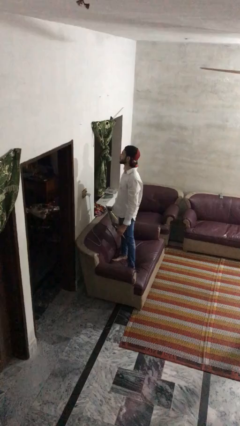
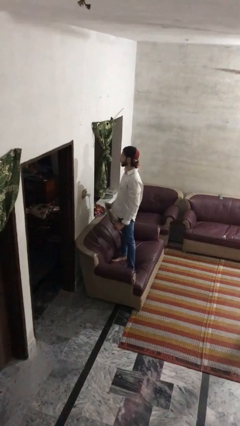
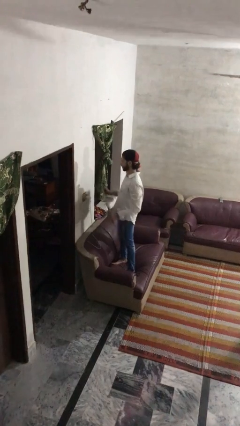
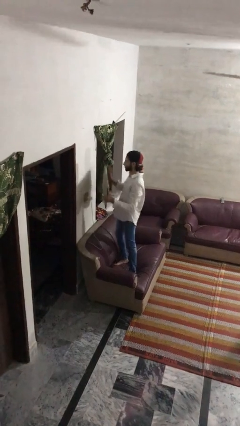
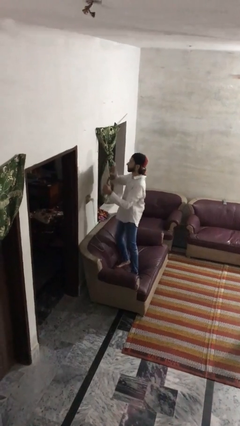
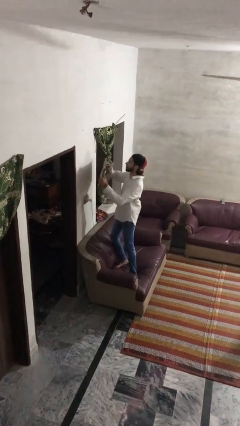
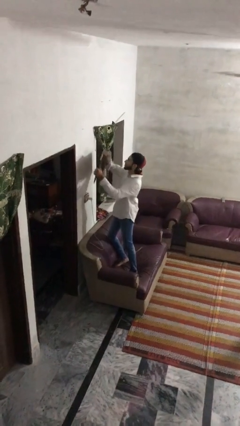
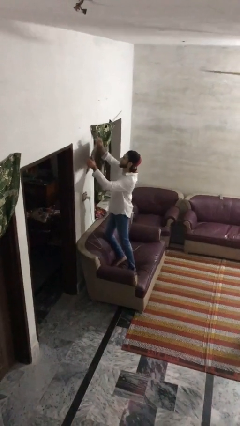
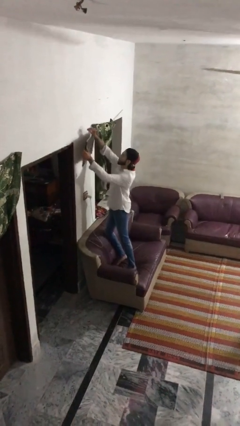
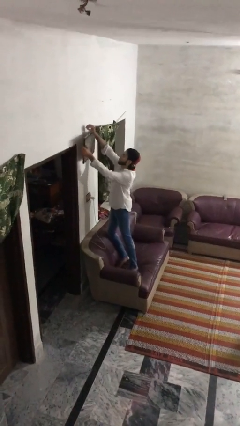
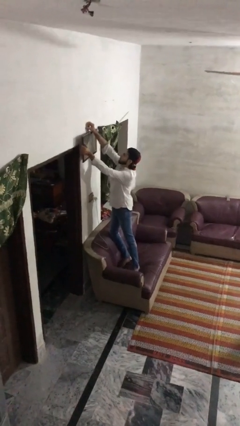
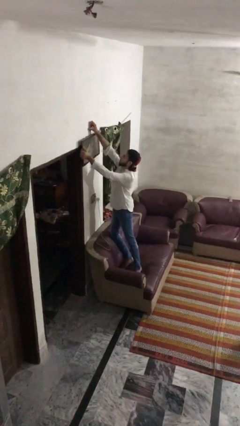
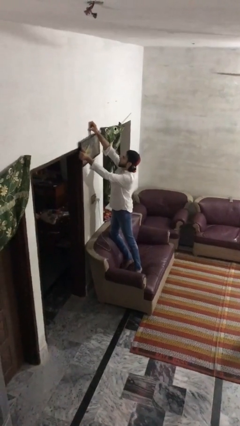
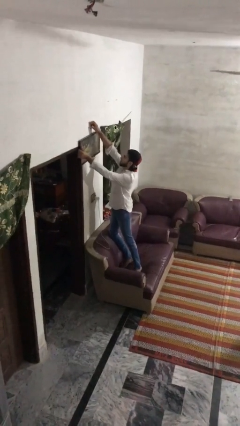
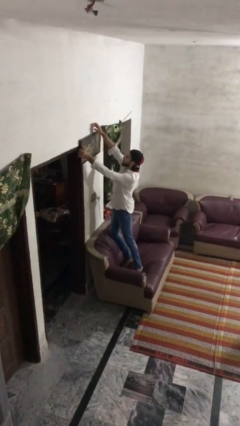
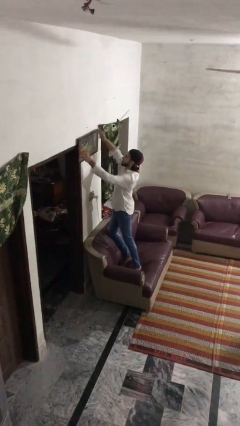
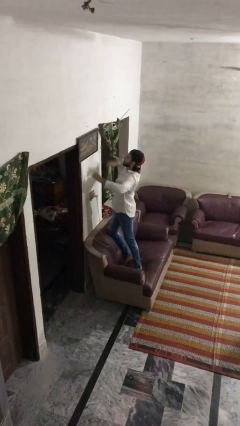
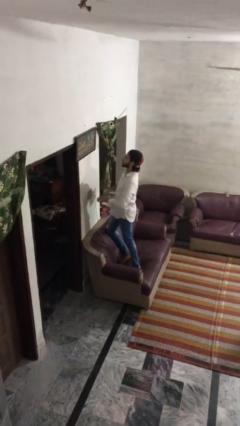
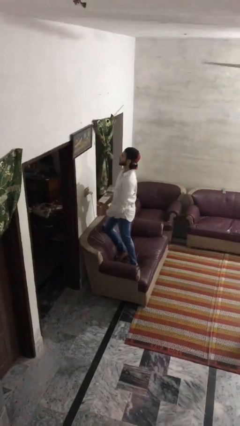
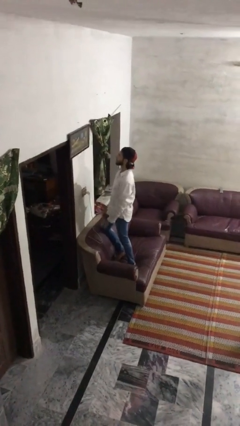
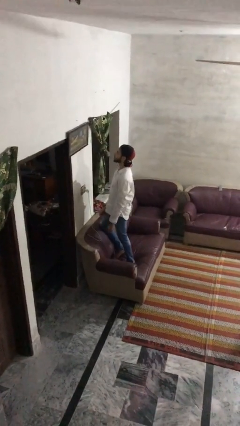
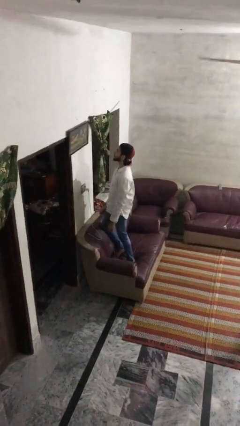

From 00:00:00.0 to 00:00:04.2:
person puts up picture frame

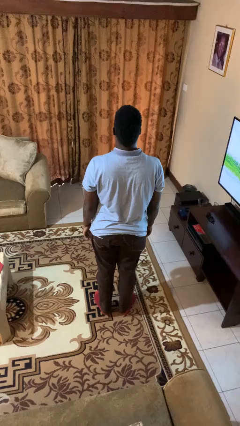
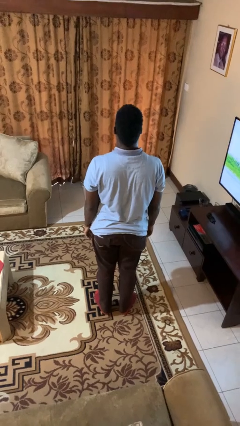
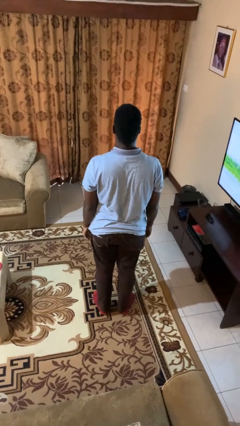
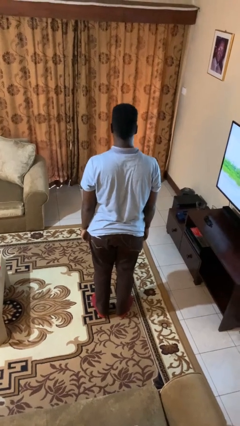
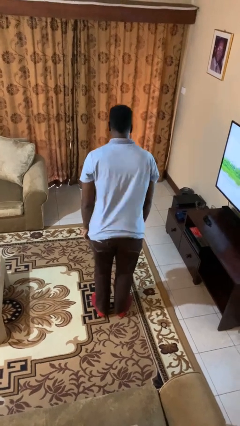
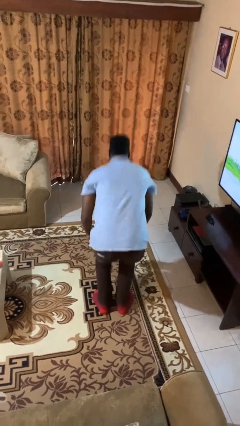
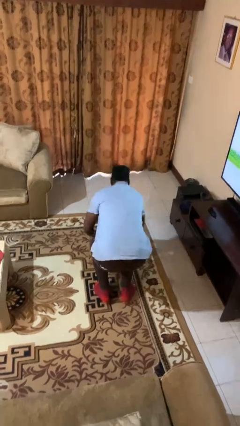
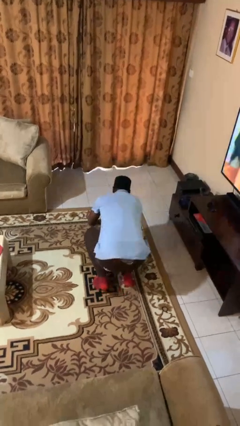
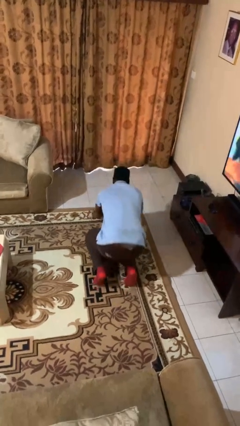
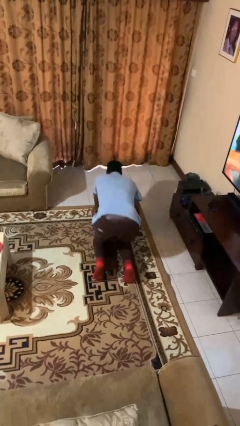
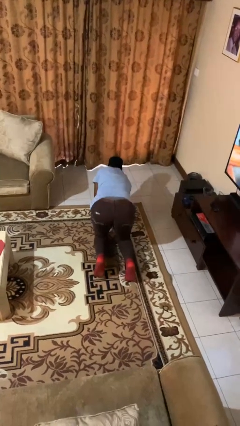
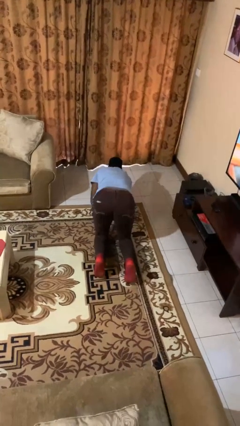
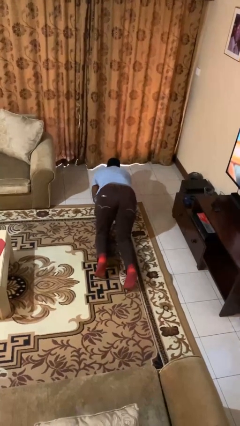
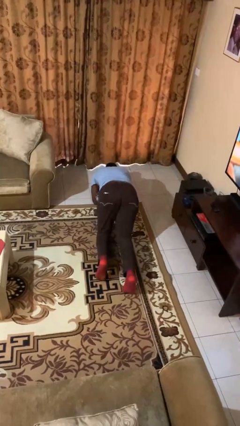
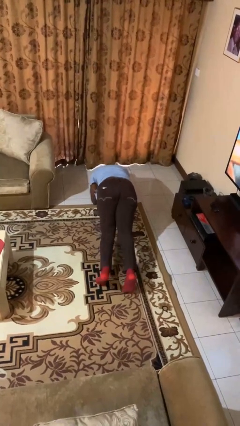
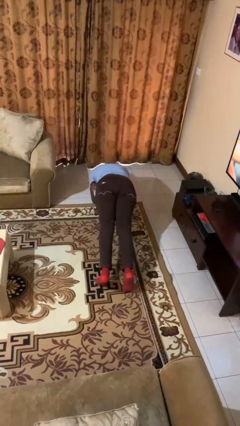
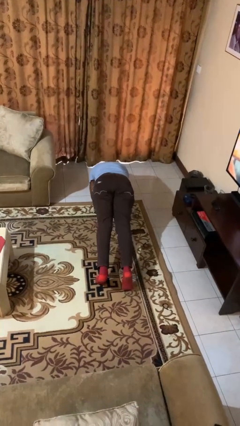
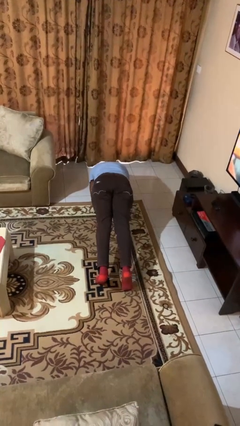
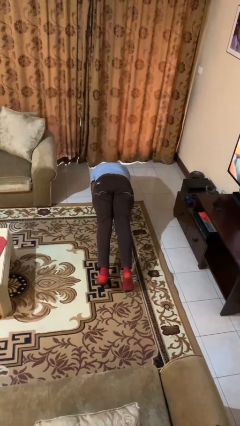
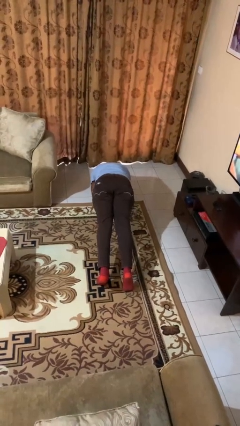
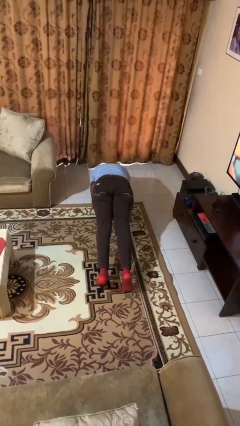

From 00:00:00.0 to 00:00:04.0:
person exercises with plank

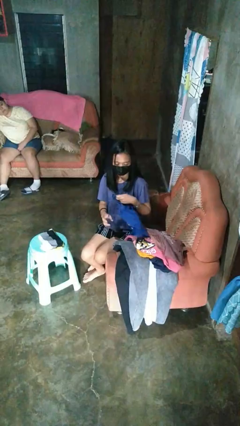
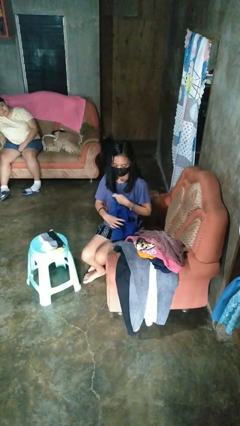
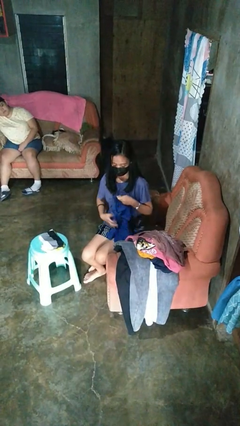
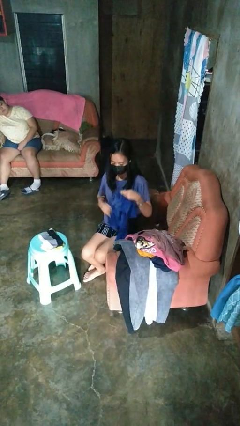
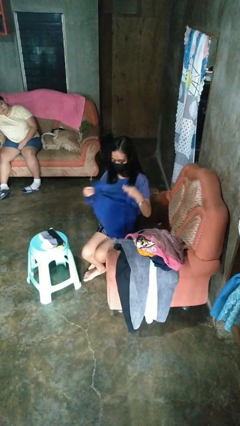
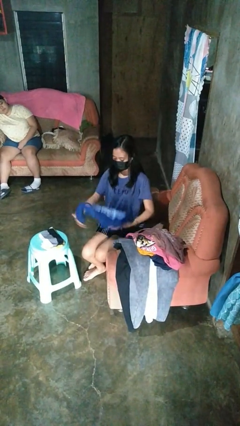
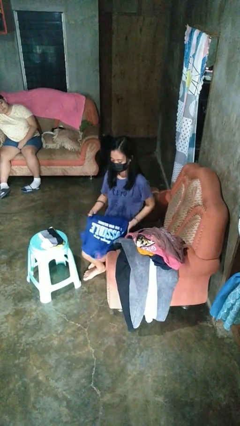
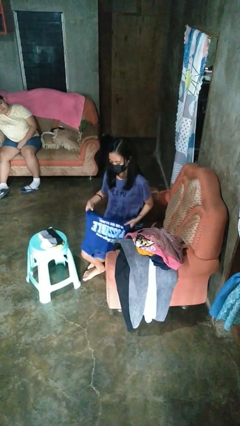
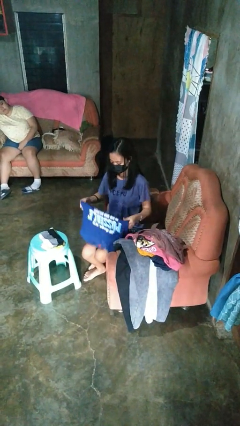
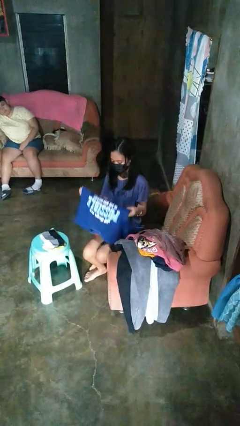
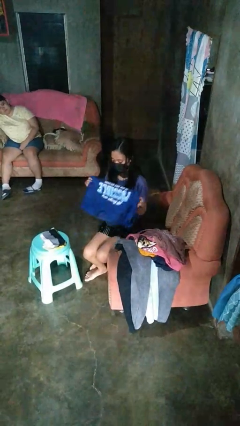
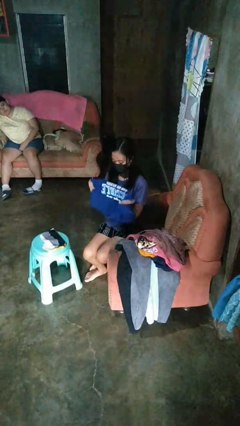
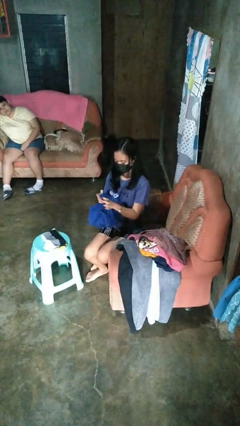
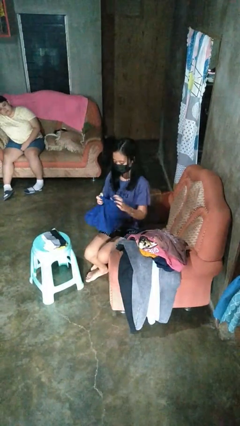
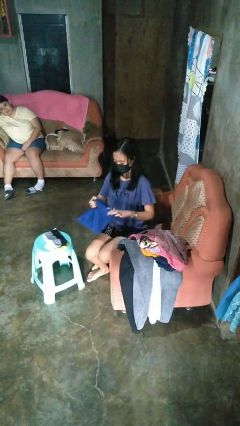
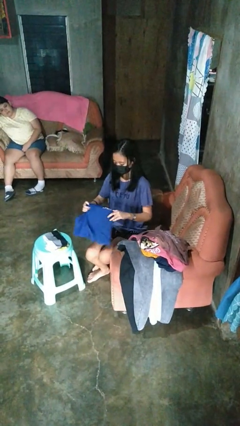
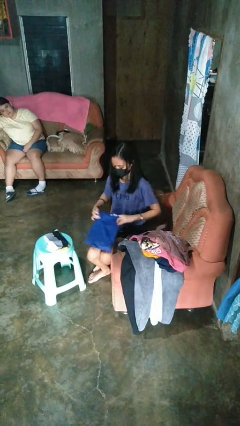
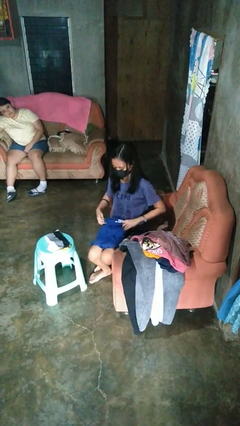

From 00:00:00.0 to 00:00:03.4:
person folds shirt

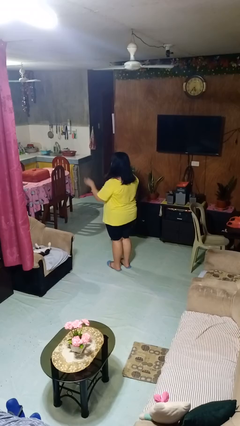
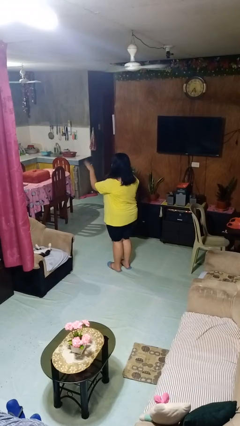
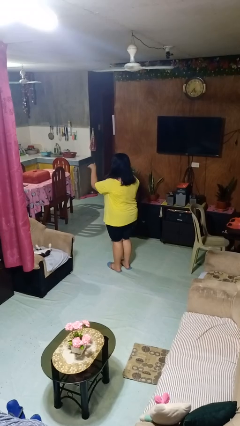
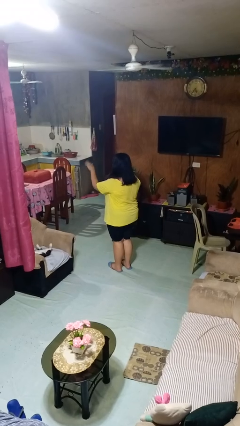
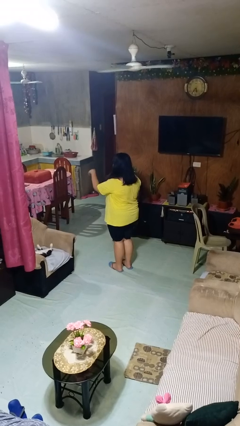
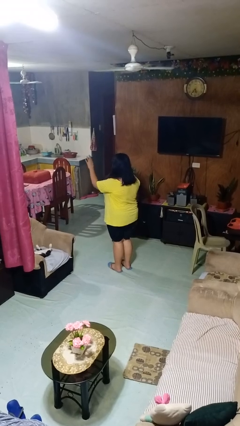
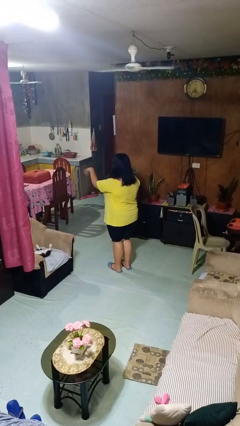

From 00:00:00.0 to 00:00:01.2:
person gestures come here

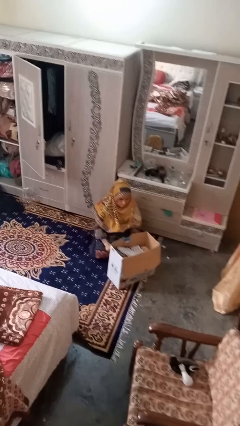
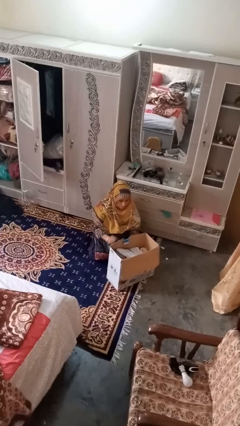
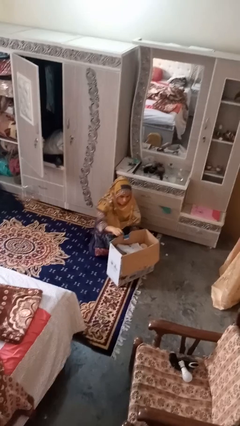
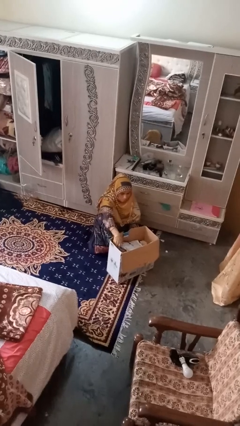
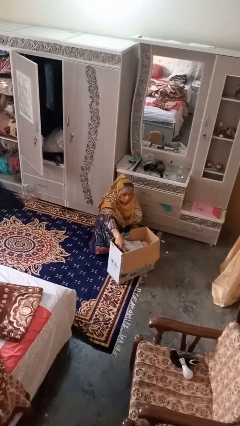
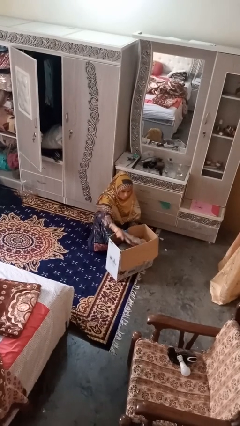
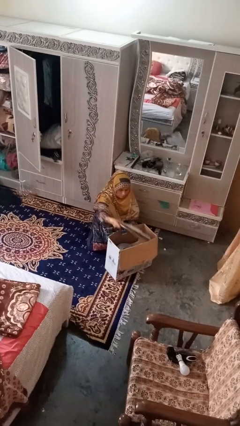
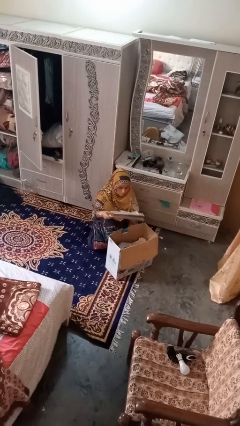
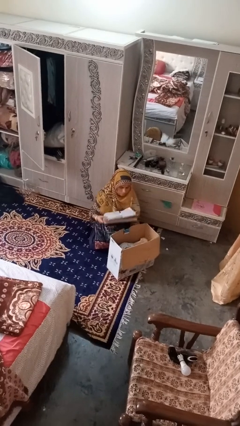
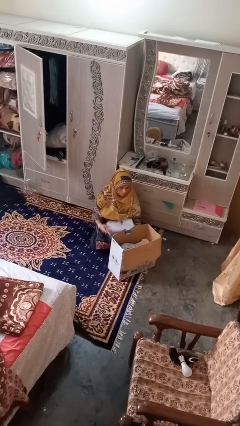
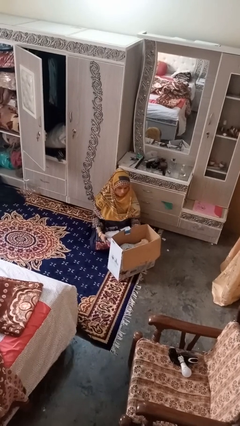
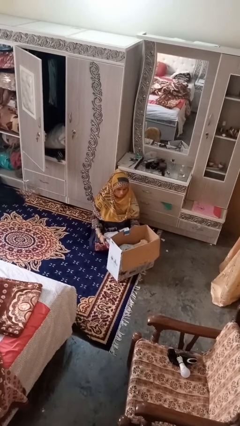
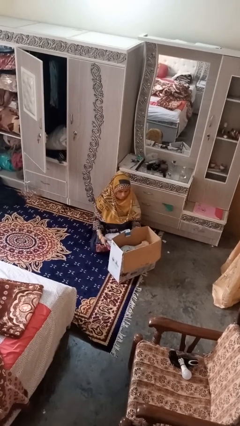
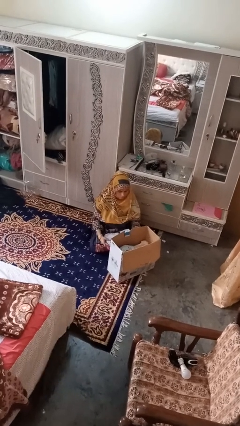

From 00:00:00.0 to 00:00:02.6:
person takes object from box

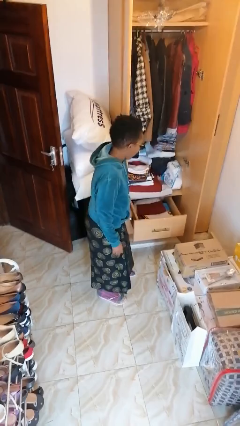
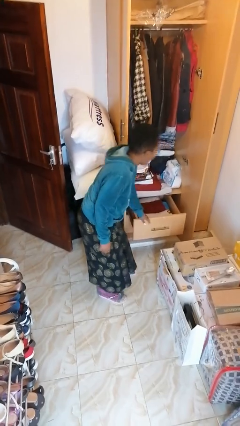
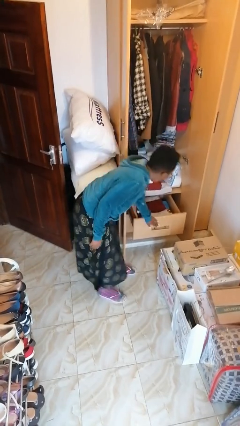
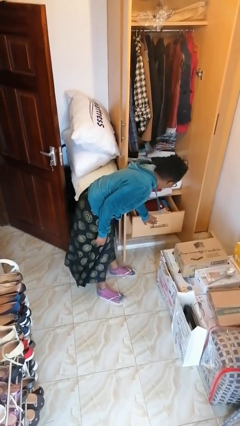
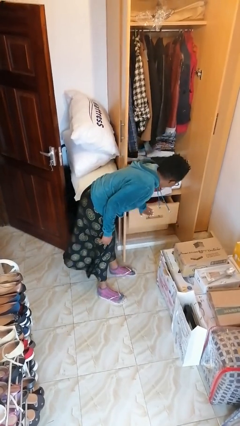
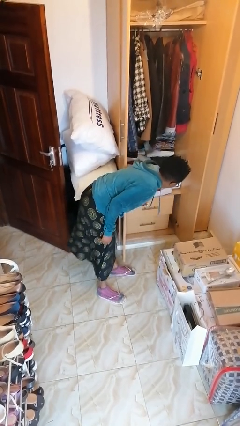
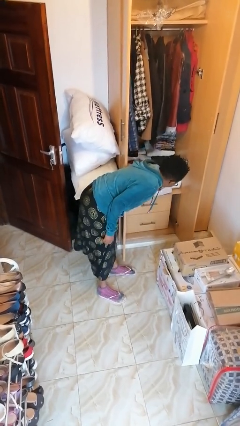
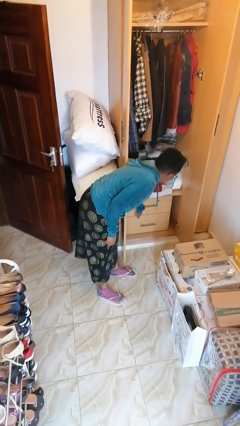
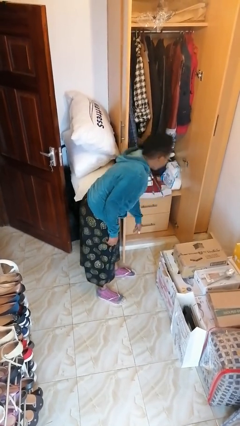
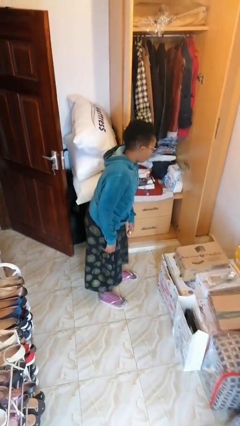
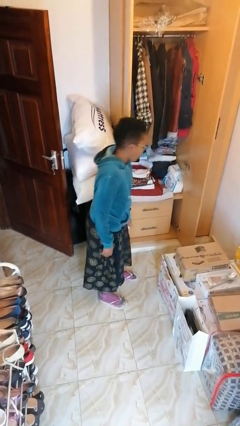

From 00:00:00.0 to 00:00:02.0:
person closes dresser drawer
